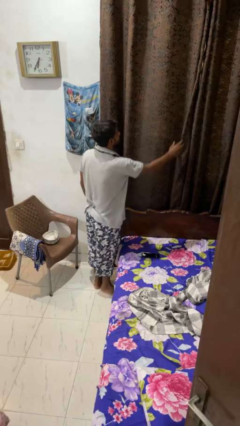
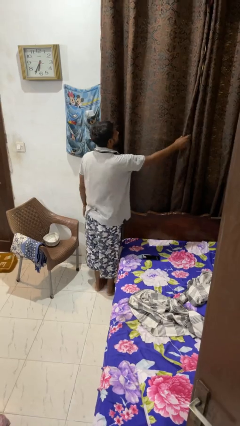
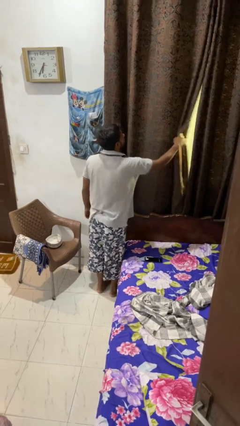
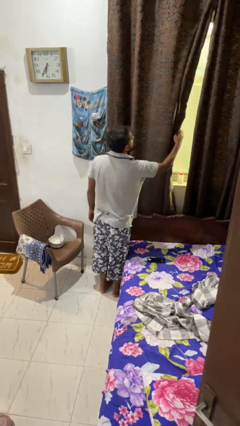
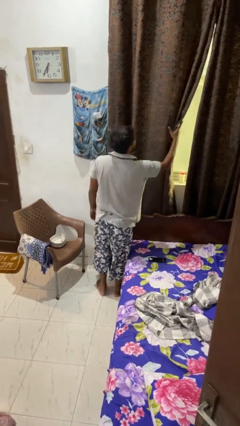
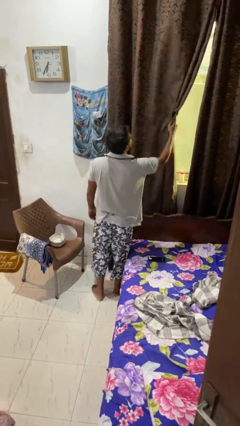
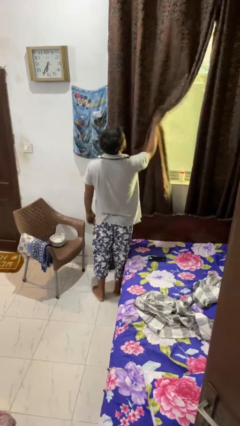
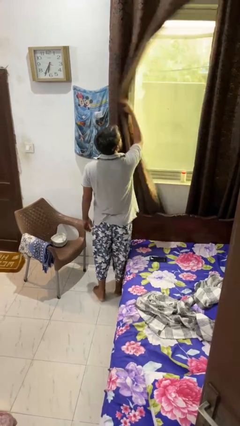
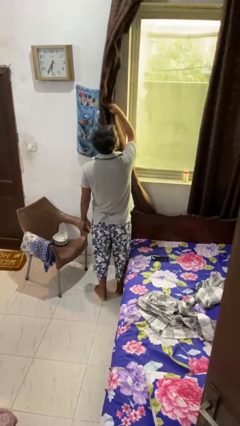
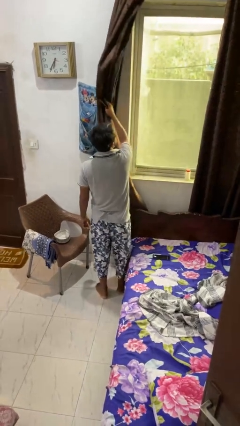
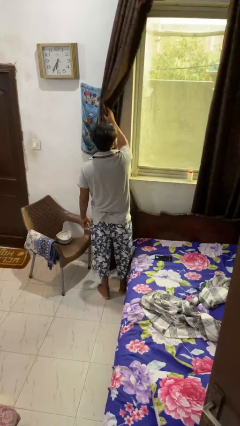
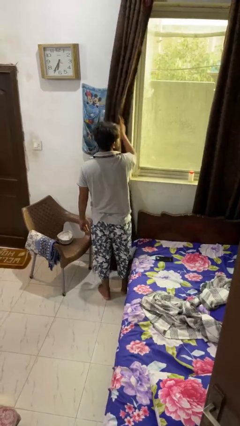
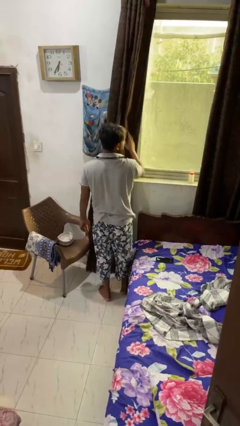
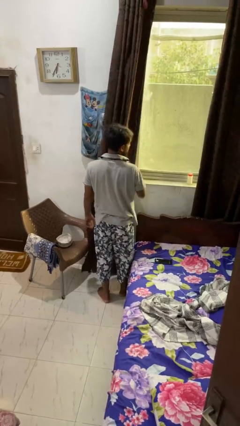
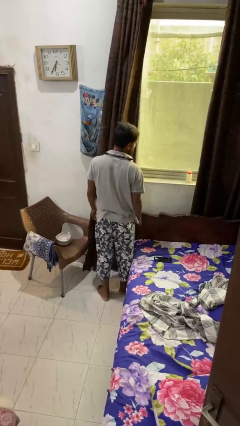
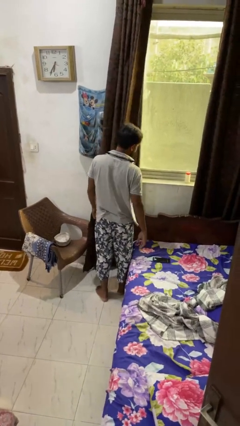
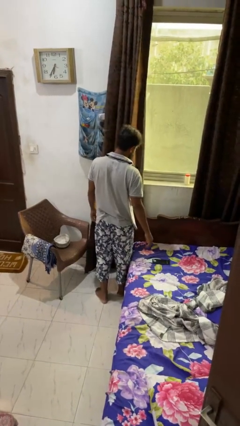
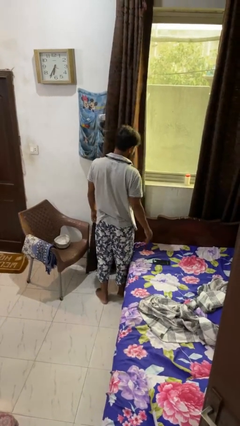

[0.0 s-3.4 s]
person opens curtains

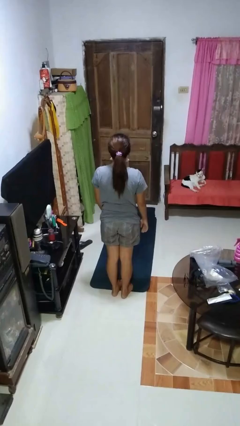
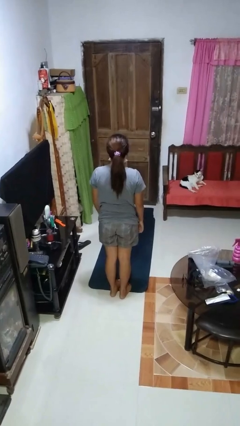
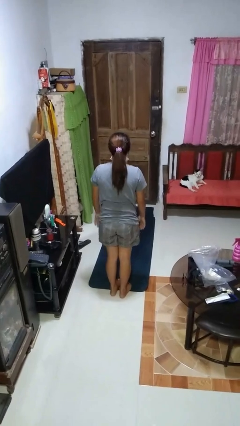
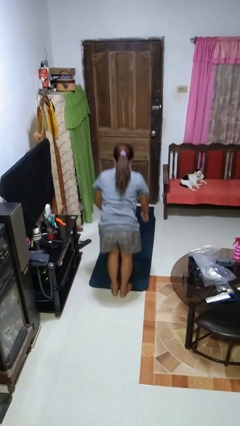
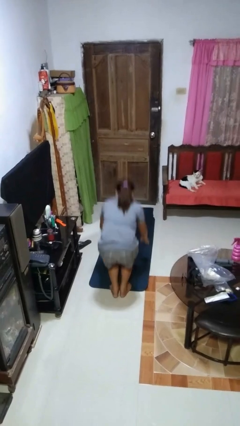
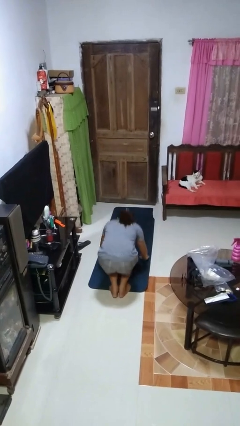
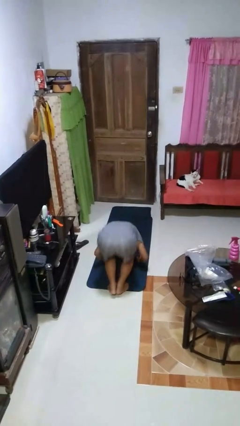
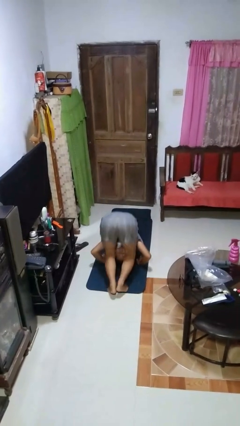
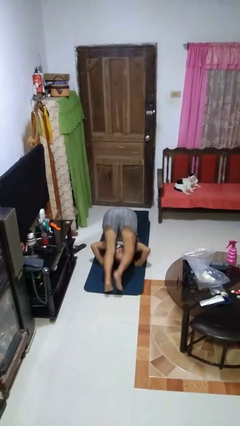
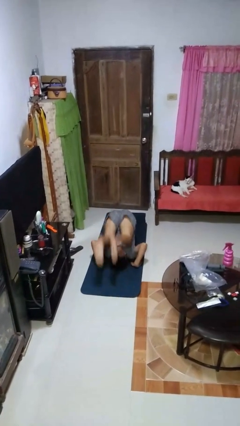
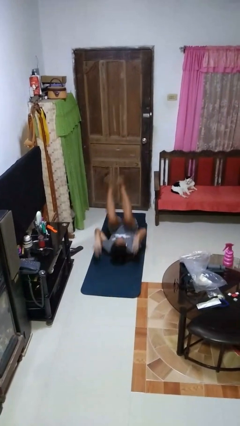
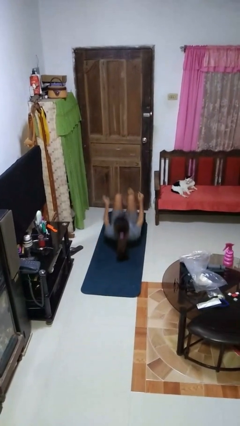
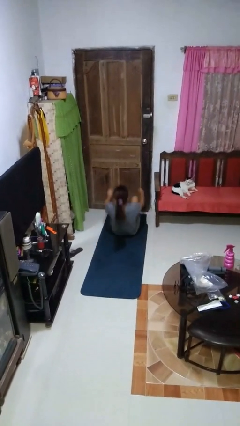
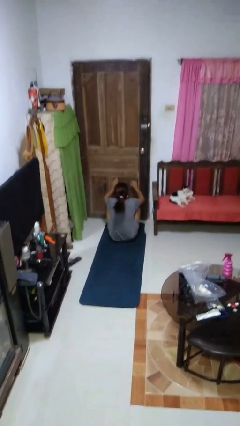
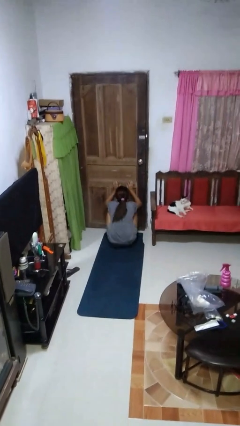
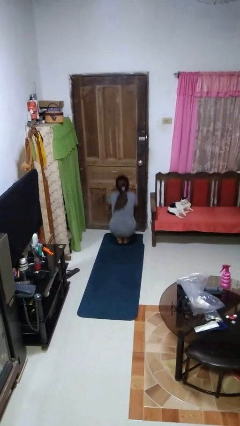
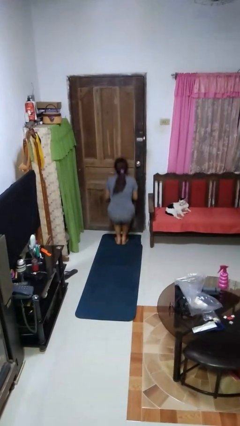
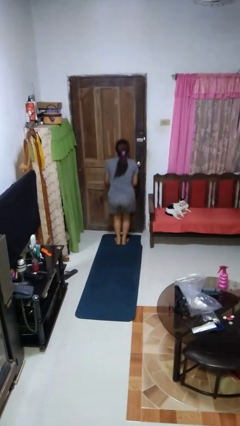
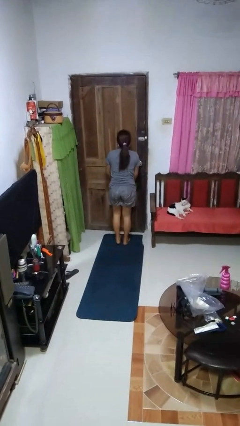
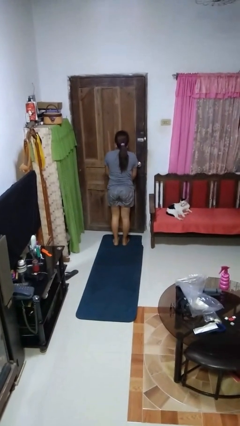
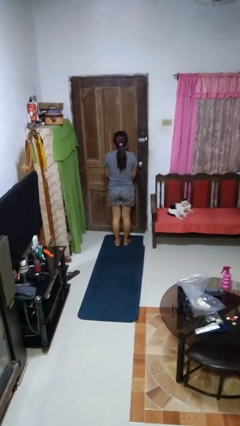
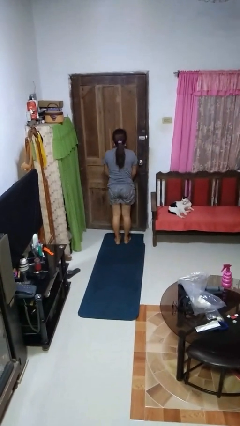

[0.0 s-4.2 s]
person somersaults

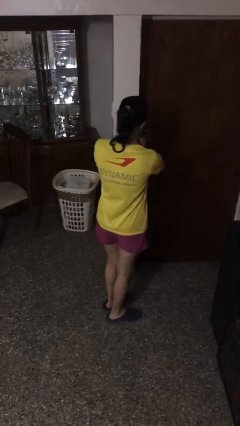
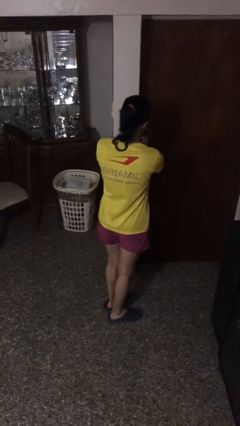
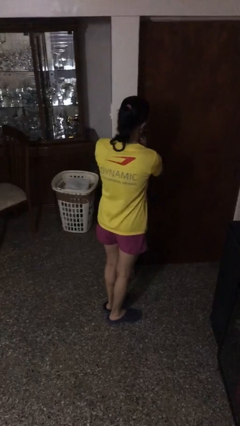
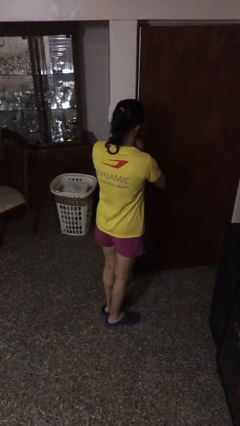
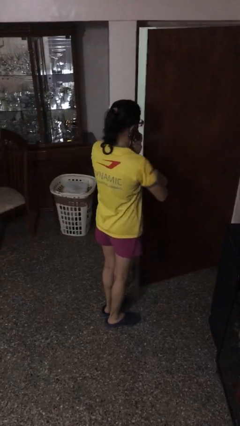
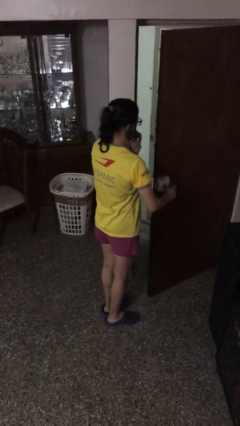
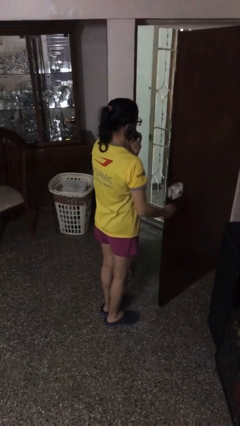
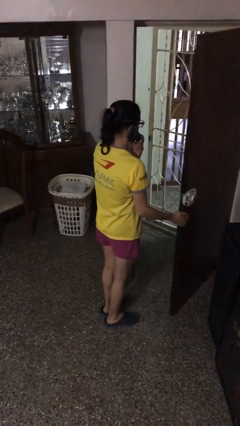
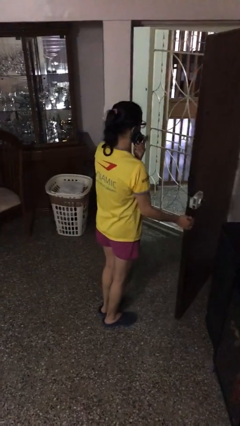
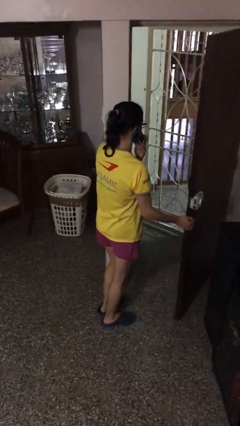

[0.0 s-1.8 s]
person opens facility door

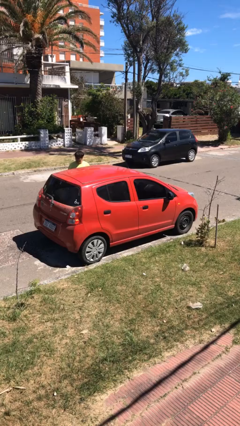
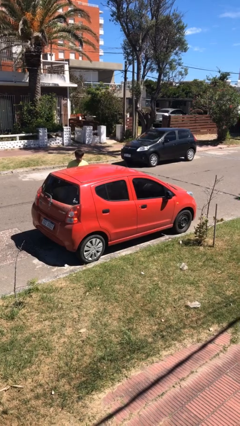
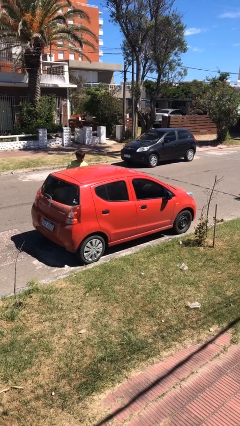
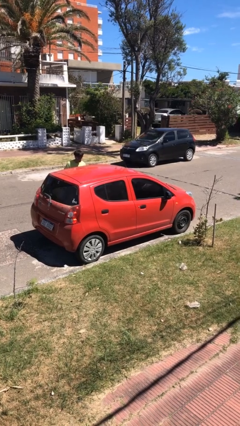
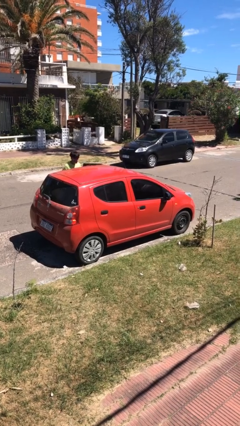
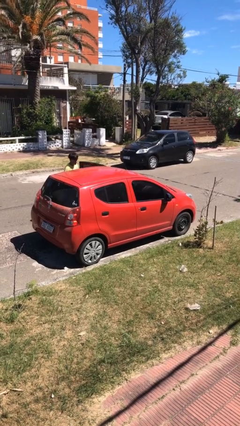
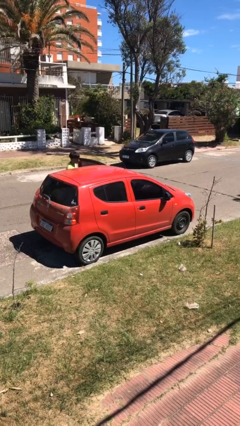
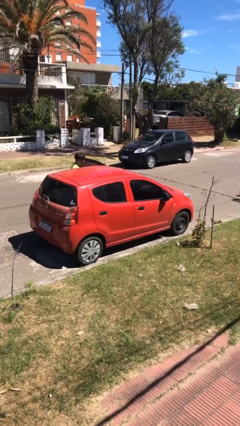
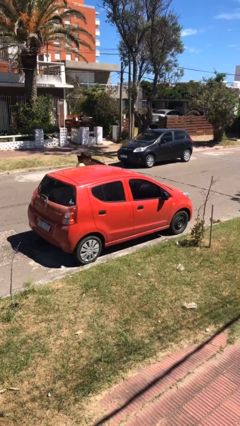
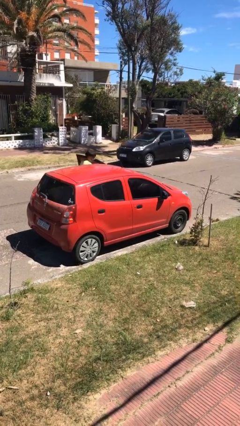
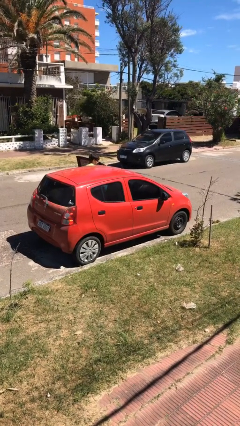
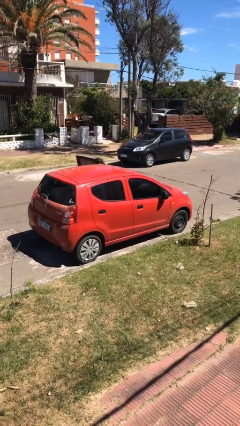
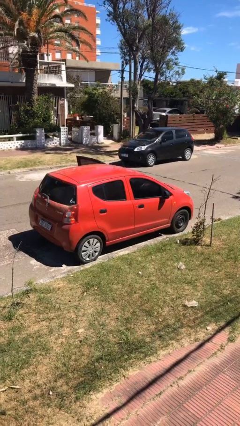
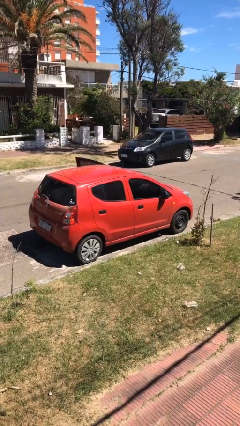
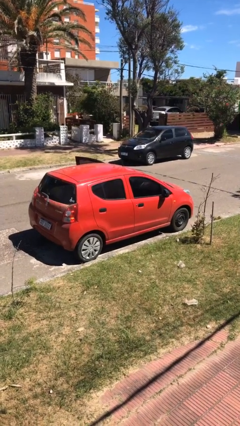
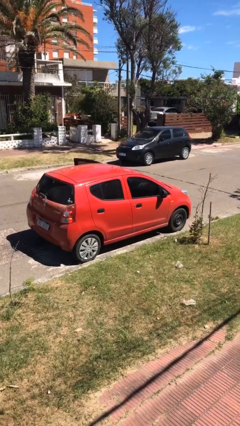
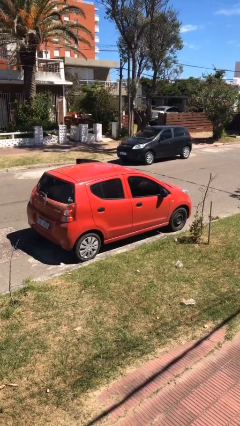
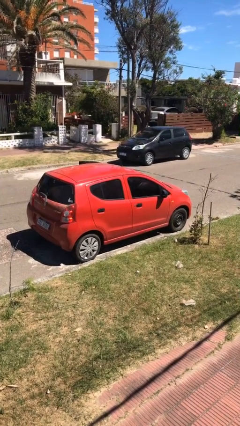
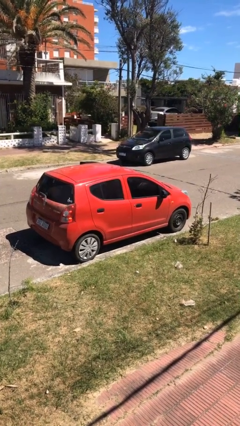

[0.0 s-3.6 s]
car picks up person

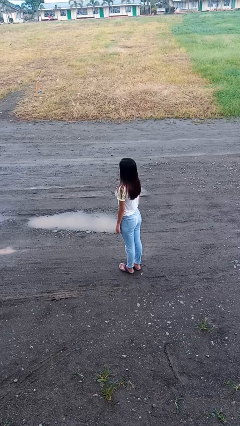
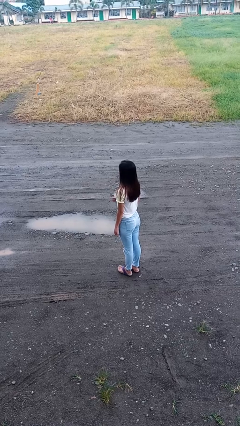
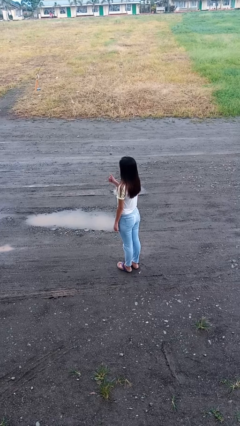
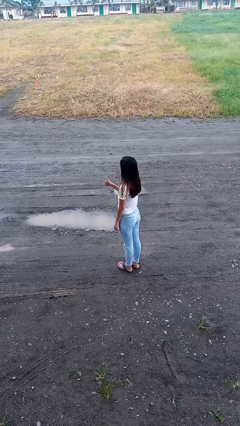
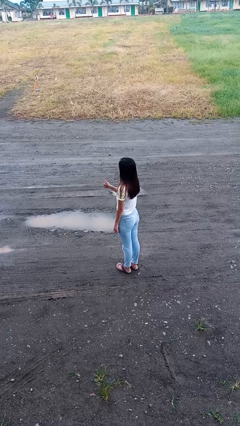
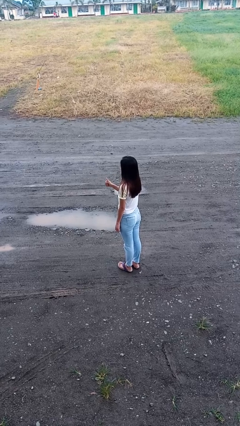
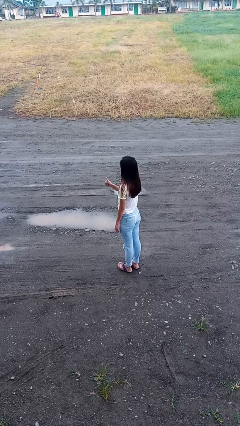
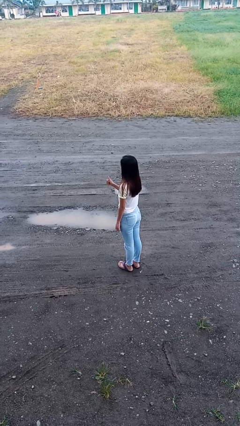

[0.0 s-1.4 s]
person gestures thumbs up

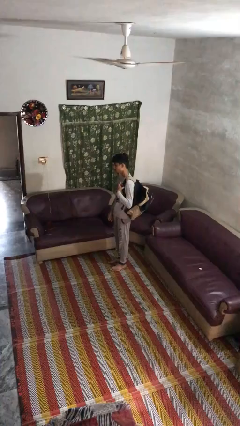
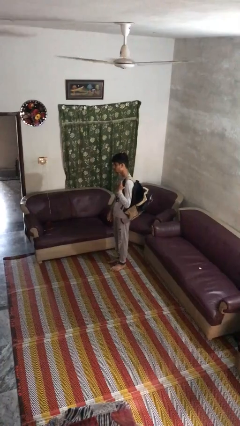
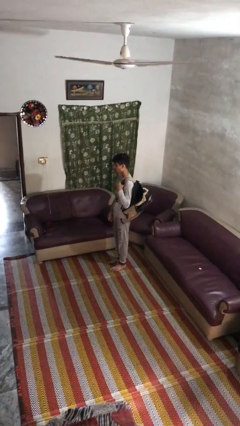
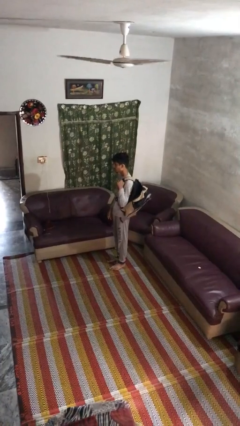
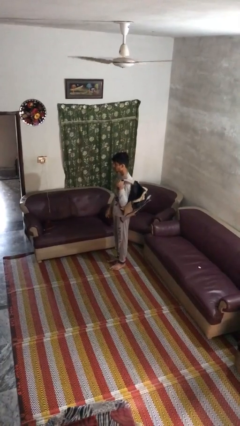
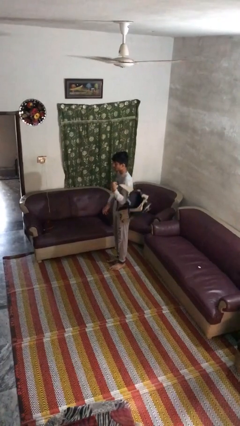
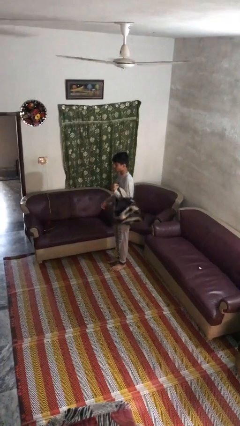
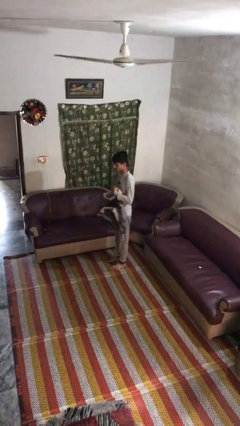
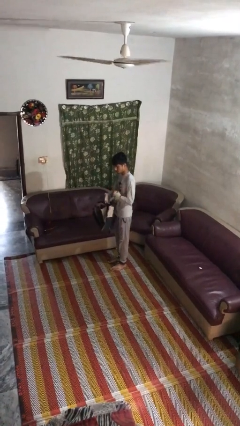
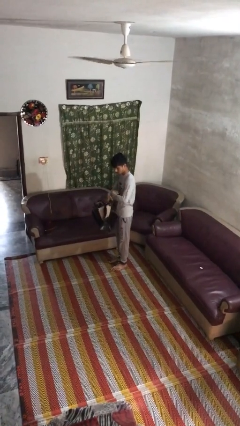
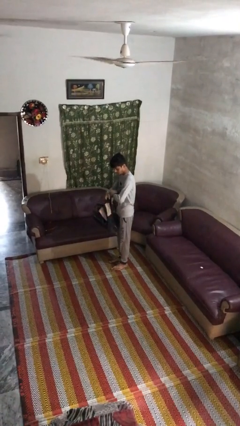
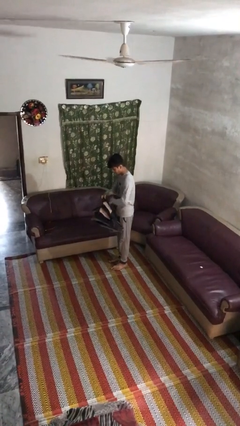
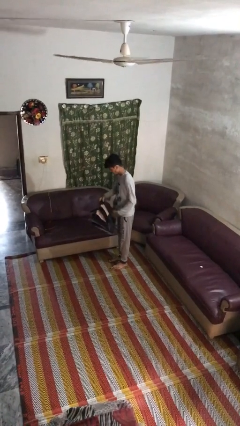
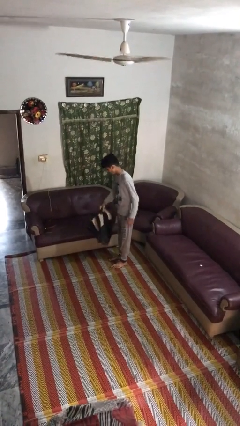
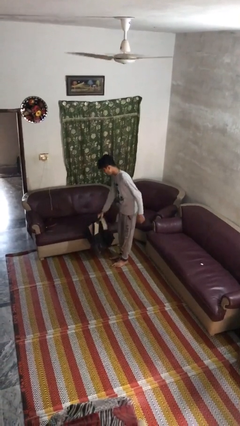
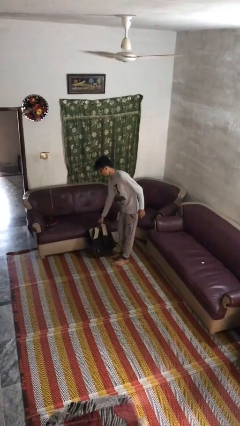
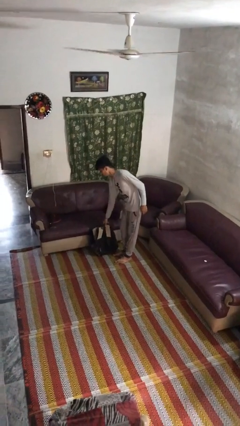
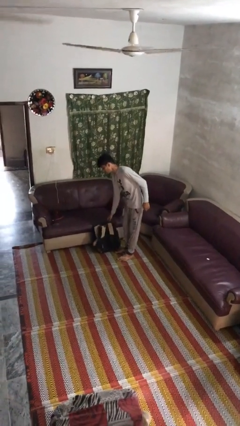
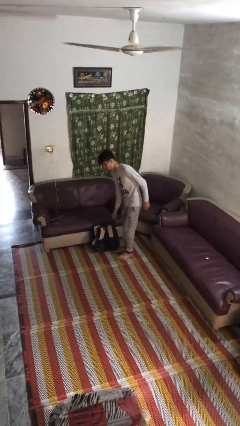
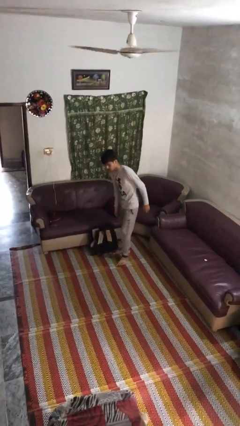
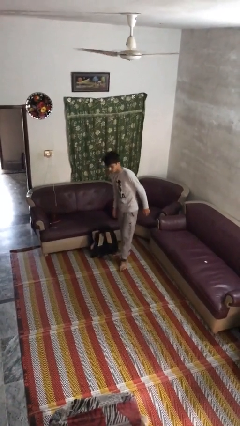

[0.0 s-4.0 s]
person puts down object on floor
